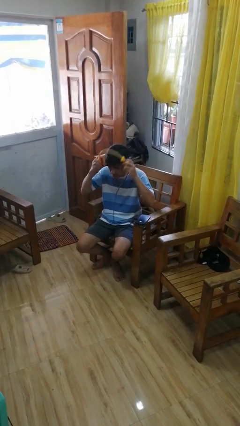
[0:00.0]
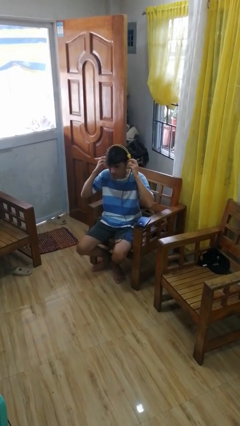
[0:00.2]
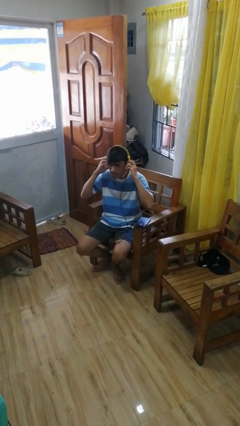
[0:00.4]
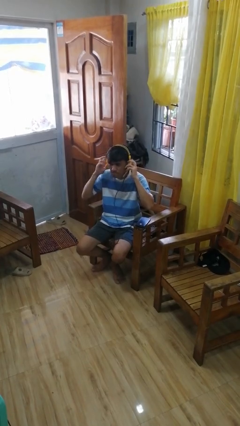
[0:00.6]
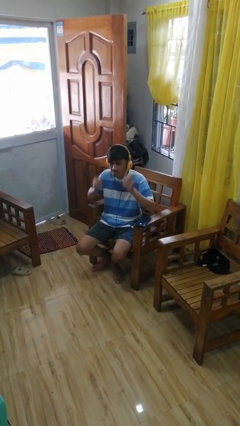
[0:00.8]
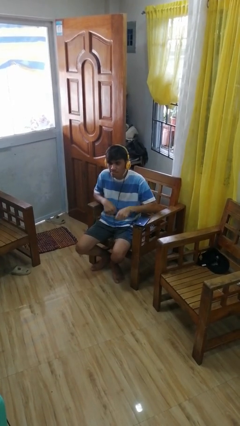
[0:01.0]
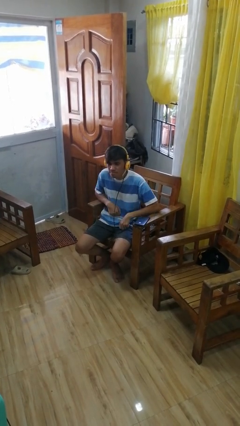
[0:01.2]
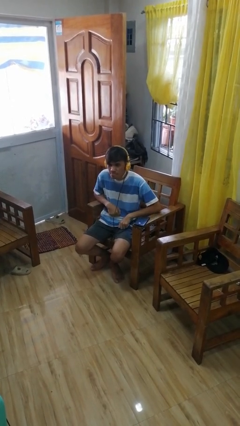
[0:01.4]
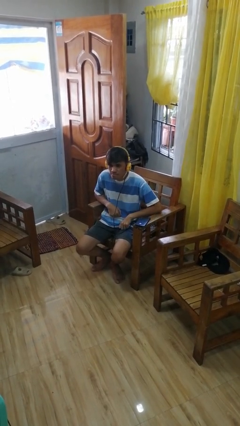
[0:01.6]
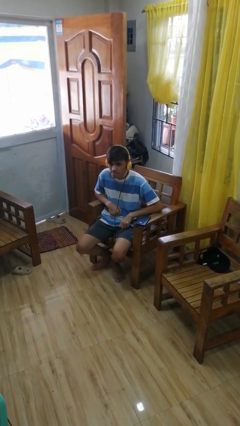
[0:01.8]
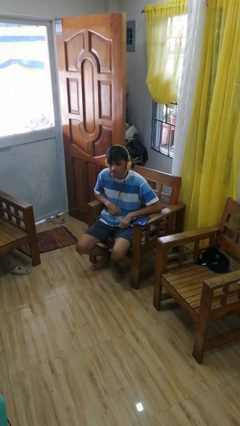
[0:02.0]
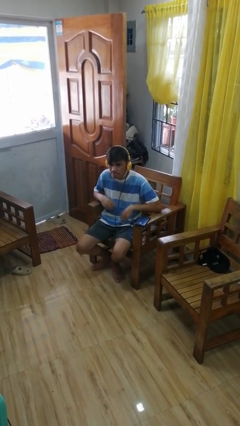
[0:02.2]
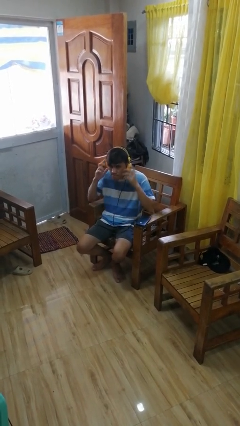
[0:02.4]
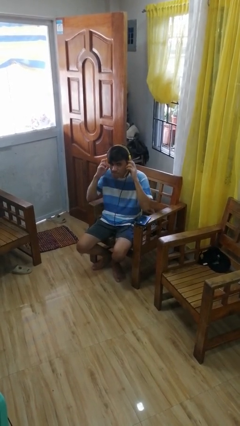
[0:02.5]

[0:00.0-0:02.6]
person puts on headphones

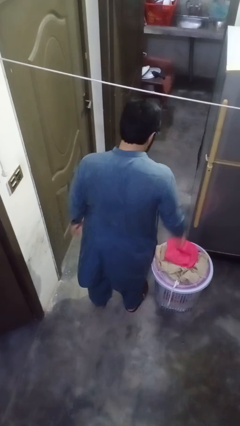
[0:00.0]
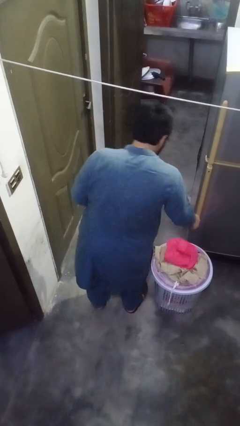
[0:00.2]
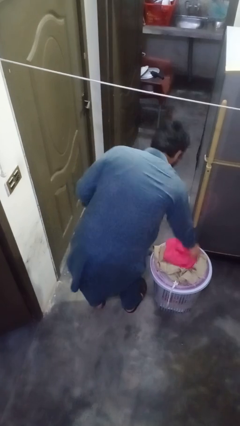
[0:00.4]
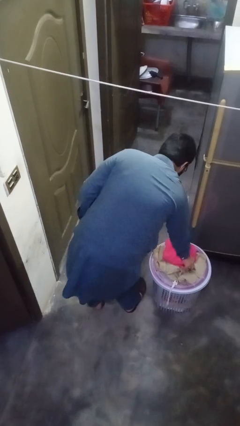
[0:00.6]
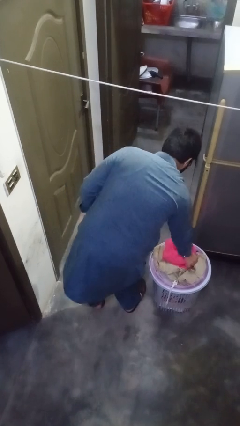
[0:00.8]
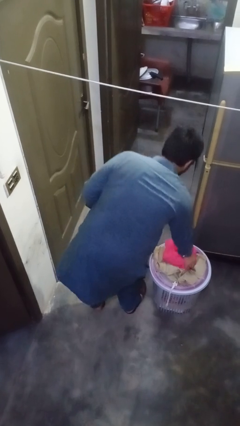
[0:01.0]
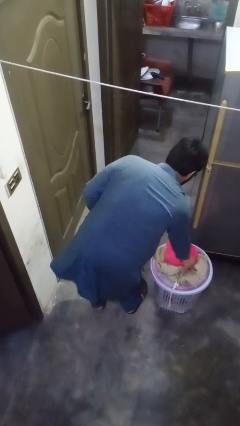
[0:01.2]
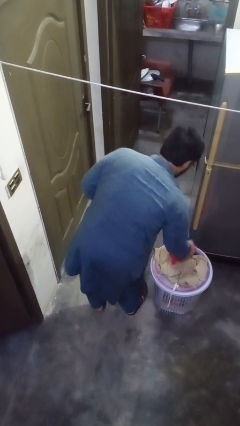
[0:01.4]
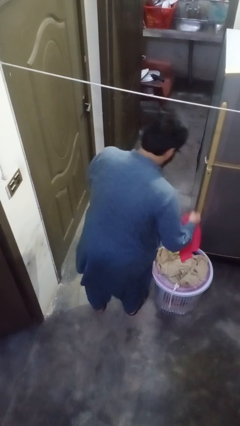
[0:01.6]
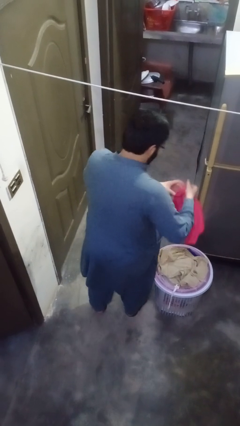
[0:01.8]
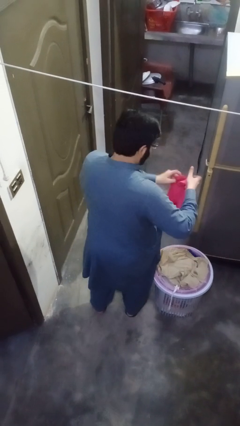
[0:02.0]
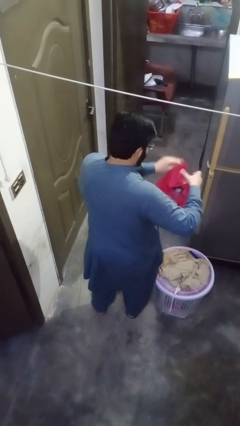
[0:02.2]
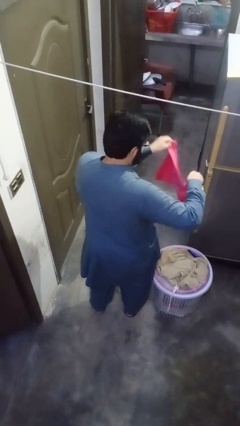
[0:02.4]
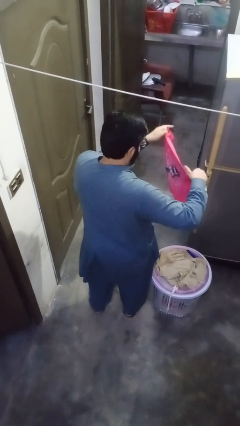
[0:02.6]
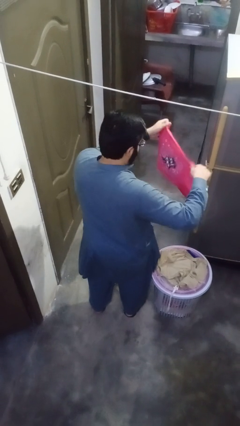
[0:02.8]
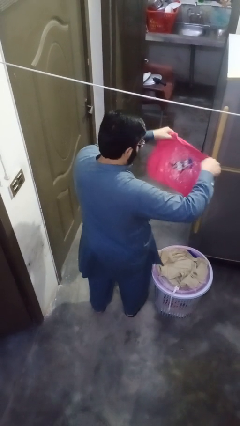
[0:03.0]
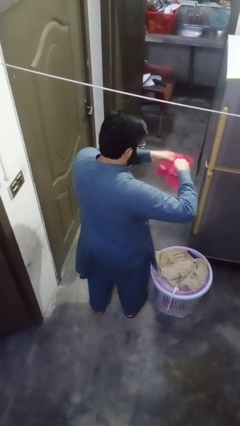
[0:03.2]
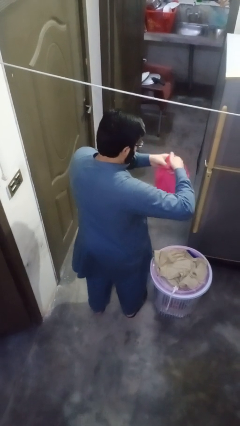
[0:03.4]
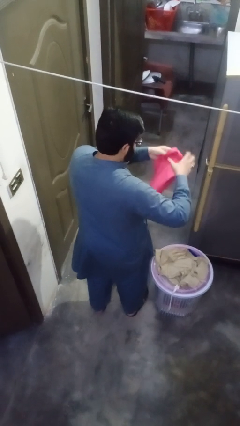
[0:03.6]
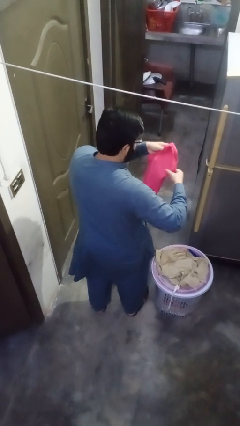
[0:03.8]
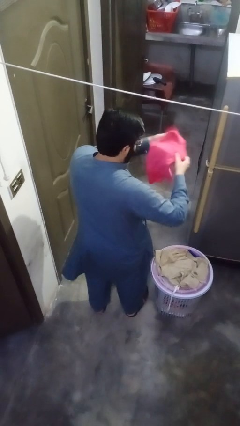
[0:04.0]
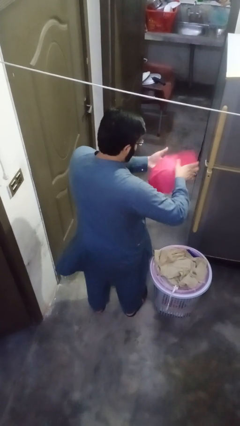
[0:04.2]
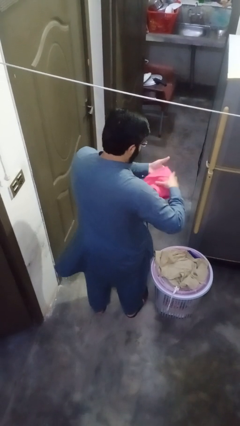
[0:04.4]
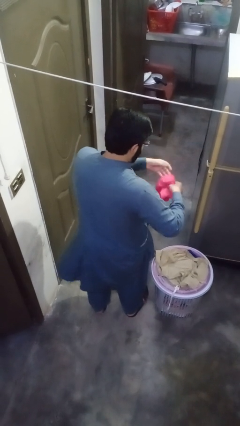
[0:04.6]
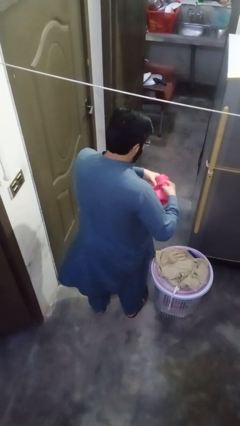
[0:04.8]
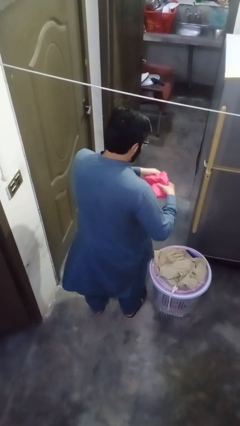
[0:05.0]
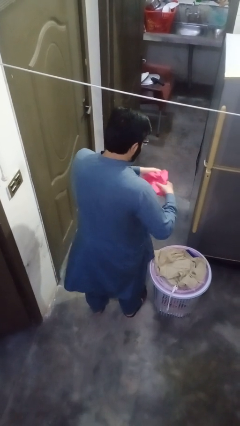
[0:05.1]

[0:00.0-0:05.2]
person folds shirt

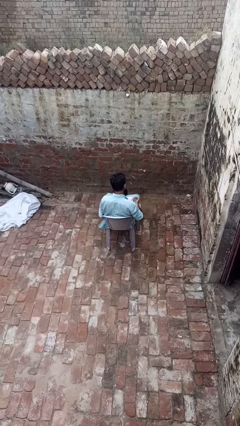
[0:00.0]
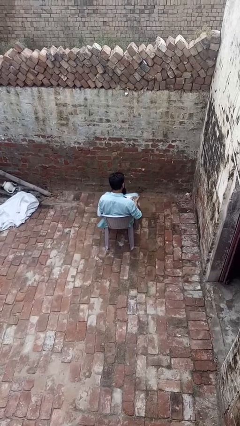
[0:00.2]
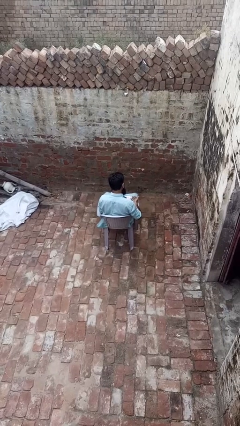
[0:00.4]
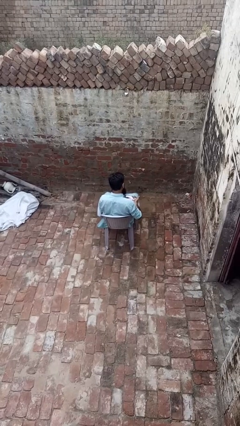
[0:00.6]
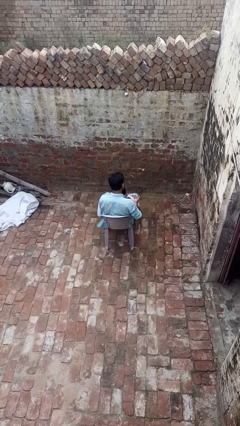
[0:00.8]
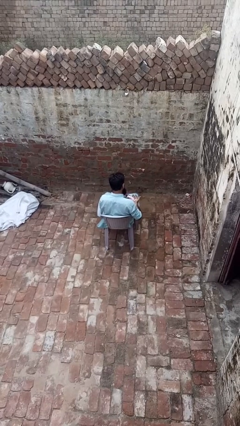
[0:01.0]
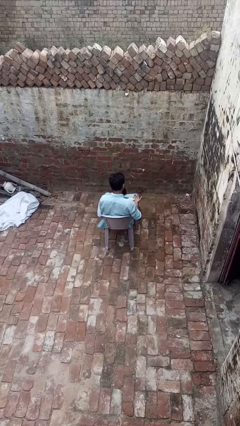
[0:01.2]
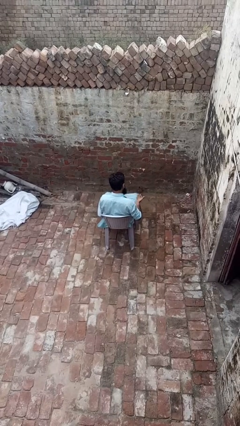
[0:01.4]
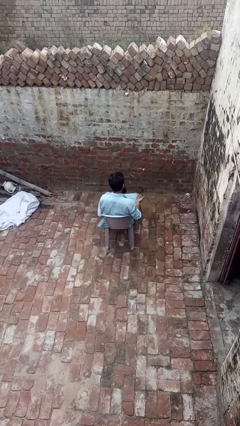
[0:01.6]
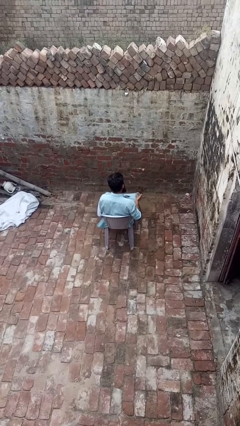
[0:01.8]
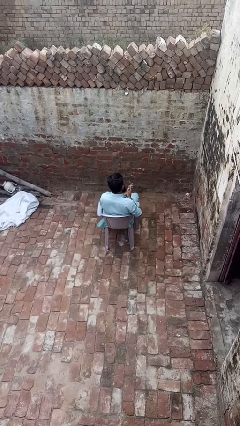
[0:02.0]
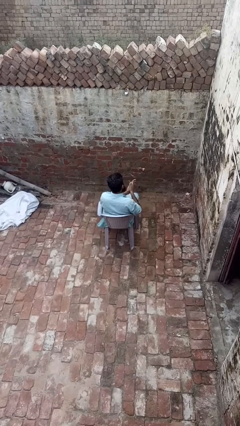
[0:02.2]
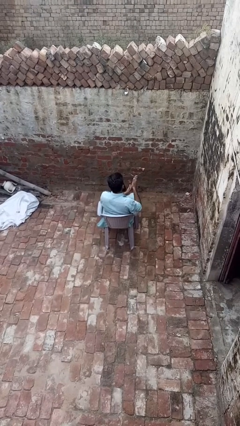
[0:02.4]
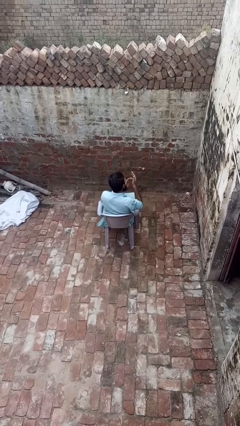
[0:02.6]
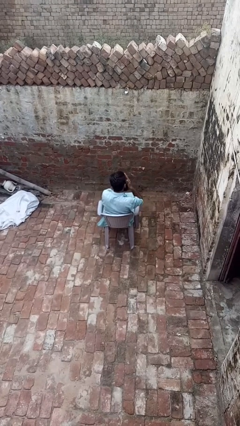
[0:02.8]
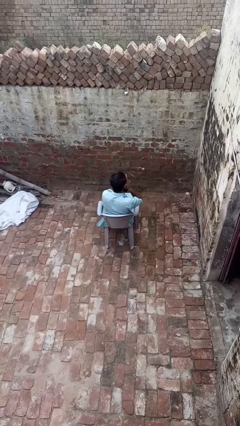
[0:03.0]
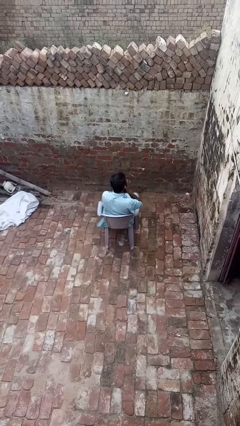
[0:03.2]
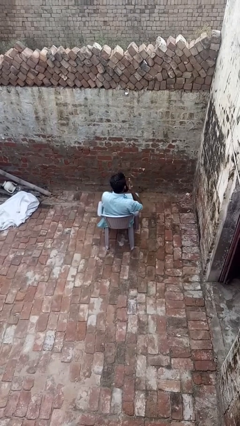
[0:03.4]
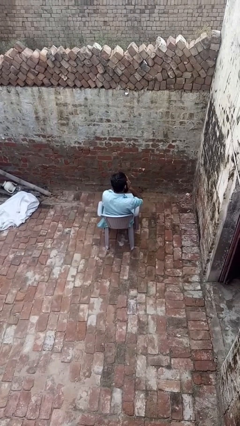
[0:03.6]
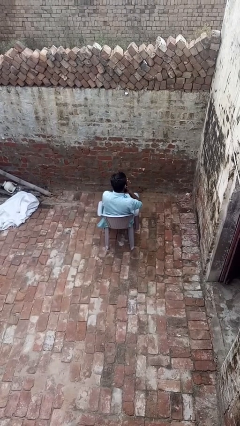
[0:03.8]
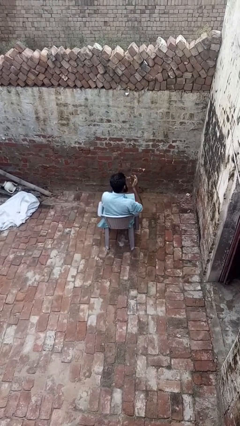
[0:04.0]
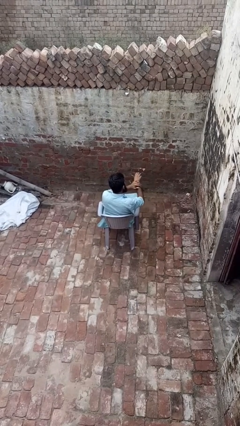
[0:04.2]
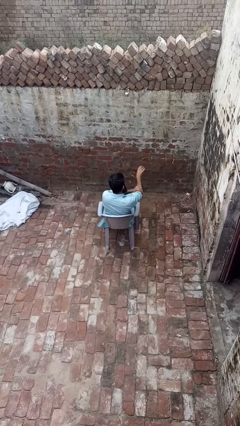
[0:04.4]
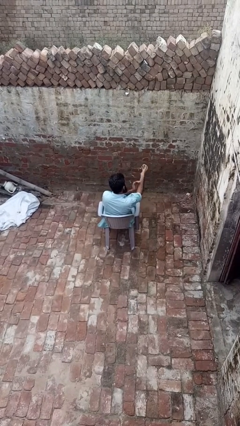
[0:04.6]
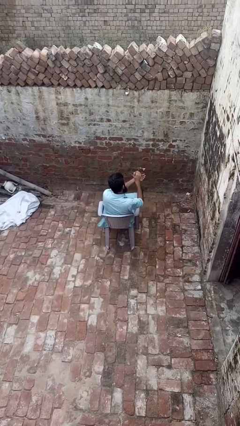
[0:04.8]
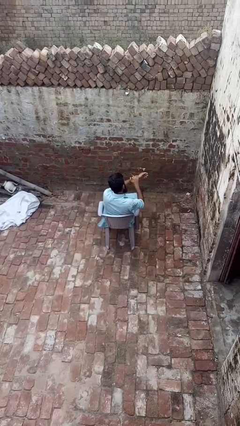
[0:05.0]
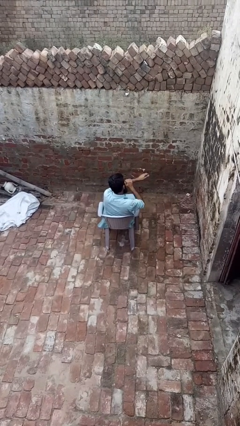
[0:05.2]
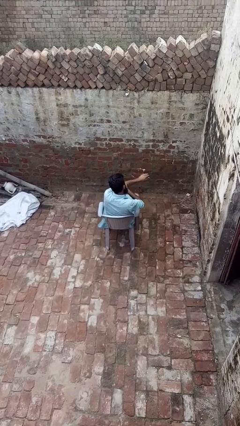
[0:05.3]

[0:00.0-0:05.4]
person applies sunscreen

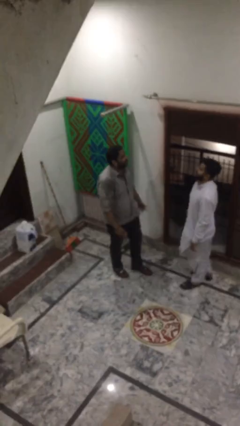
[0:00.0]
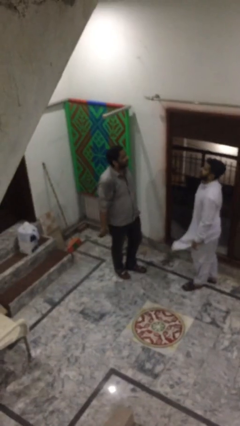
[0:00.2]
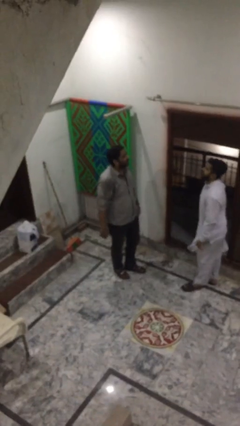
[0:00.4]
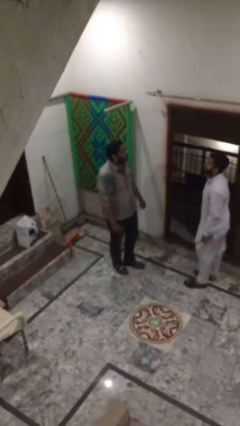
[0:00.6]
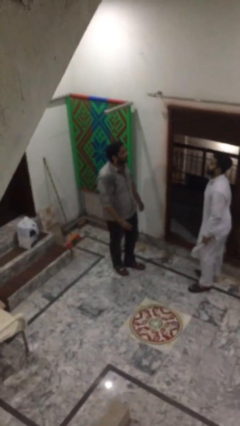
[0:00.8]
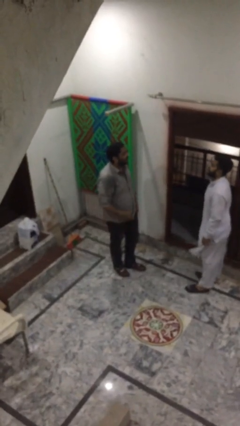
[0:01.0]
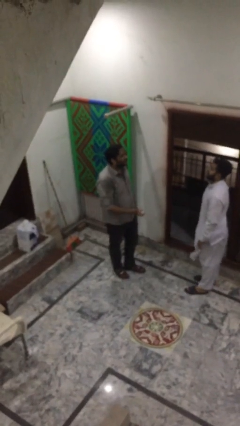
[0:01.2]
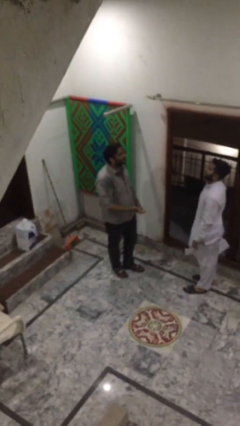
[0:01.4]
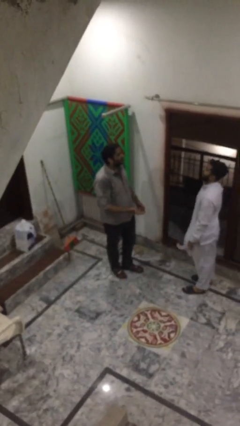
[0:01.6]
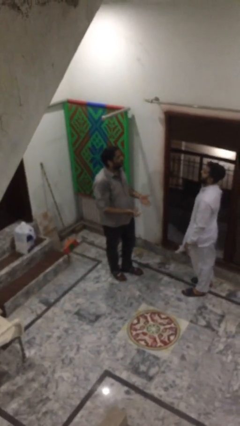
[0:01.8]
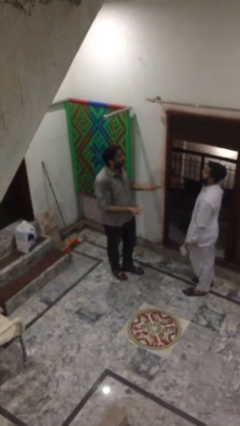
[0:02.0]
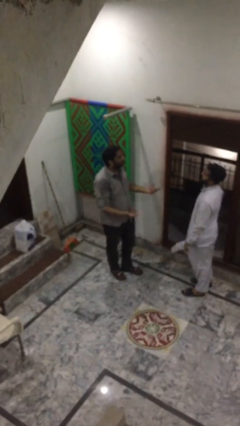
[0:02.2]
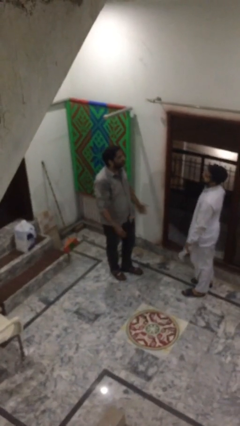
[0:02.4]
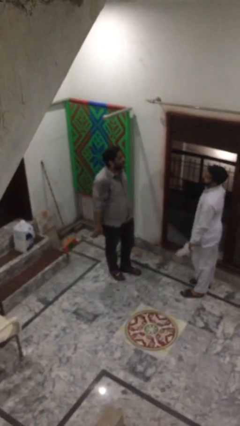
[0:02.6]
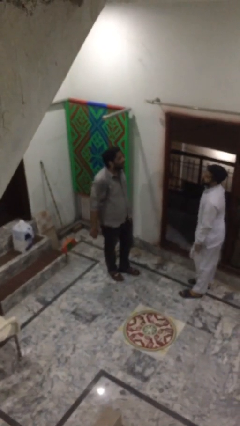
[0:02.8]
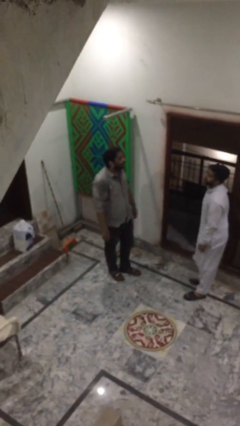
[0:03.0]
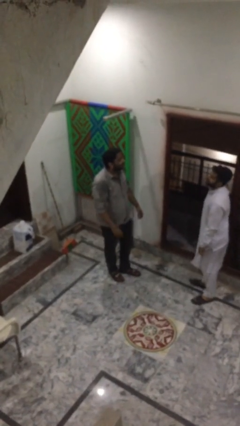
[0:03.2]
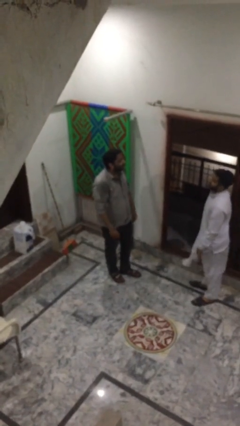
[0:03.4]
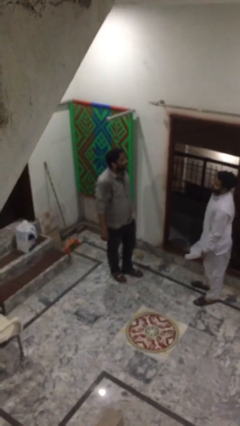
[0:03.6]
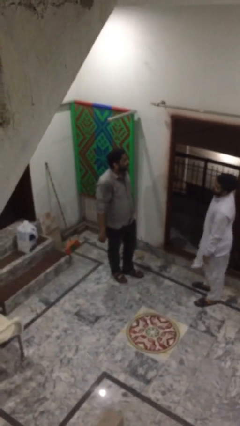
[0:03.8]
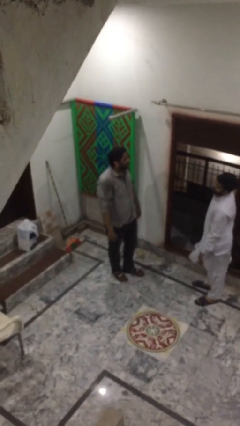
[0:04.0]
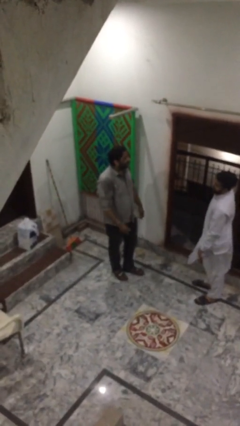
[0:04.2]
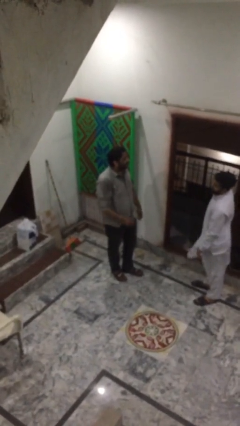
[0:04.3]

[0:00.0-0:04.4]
person talks to person
